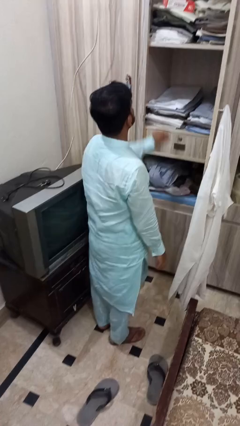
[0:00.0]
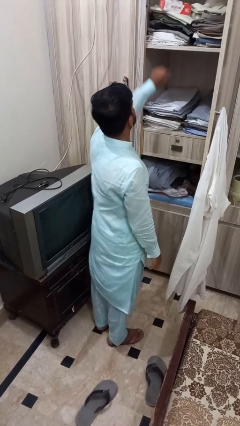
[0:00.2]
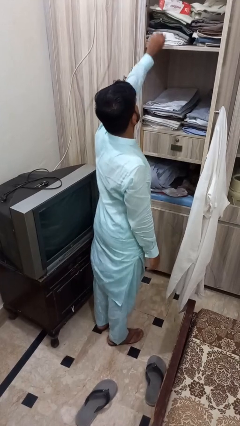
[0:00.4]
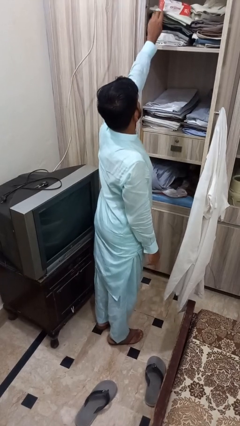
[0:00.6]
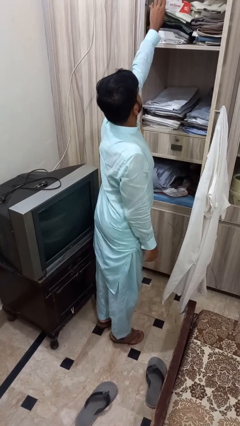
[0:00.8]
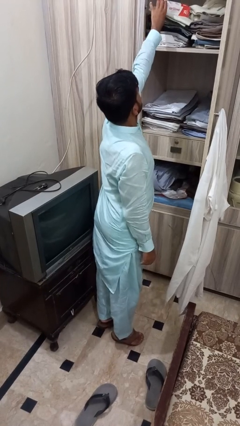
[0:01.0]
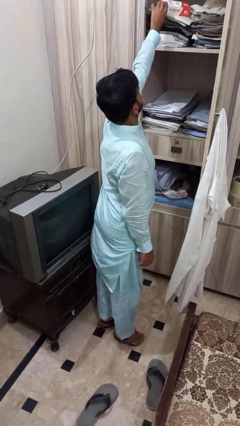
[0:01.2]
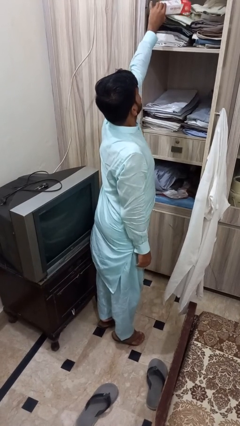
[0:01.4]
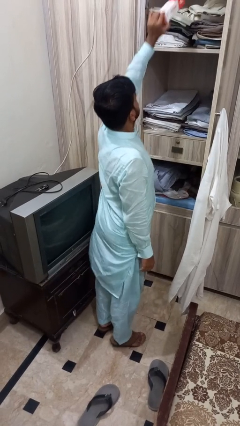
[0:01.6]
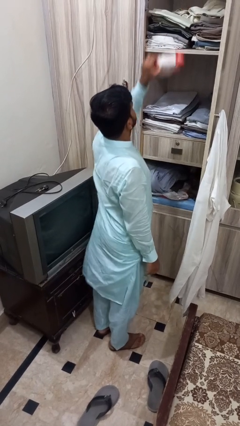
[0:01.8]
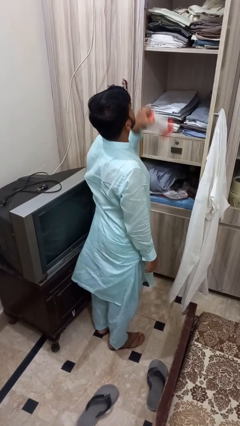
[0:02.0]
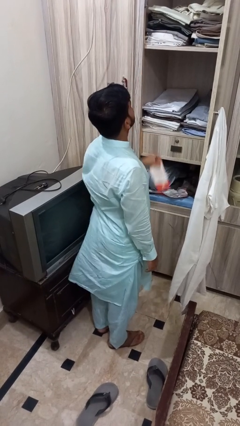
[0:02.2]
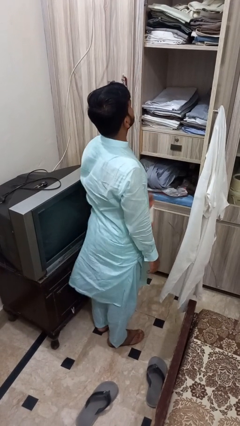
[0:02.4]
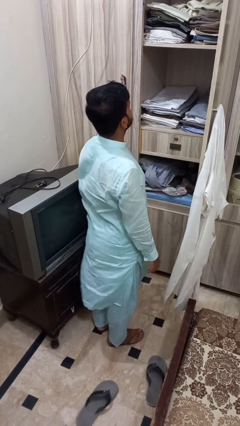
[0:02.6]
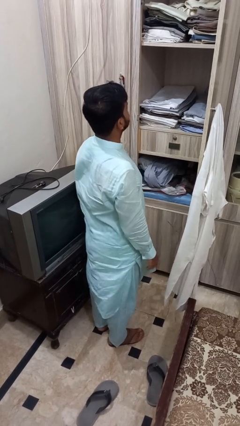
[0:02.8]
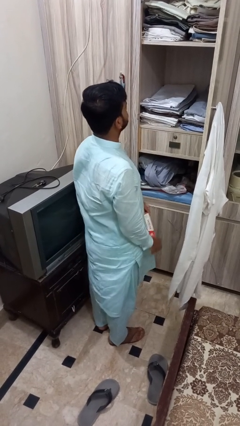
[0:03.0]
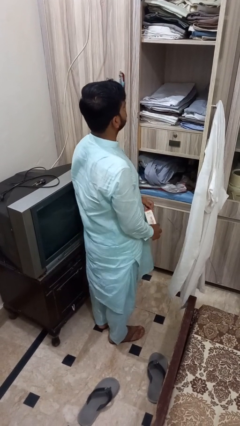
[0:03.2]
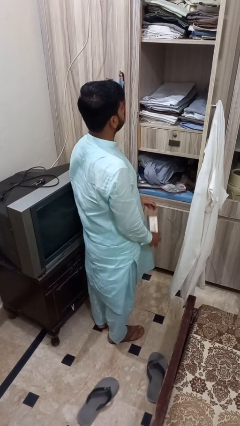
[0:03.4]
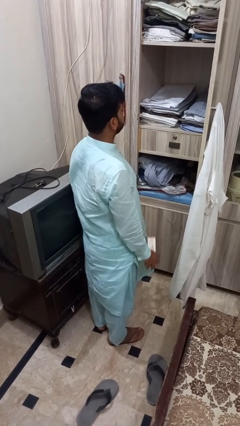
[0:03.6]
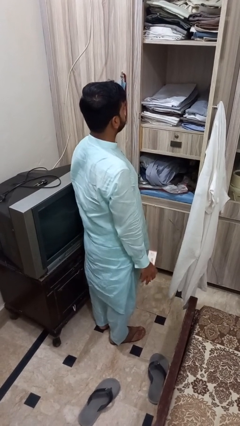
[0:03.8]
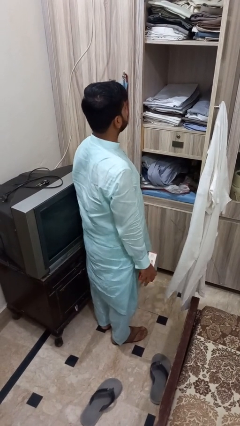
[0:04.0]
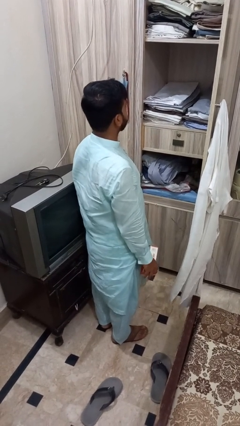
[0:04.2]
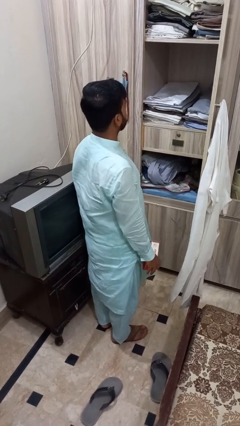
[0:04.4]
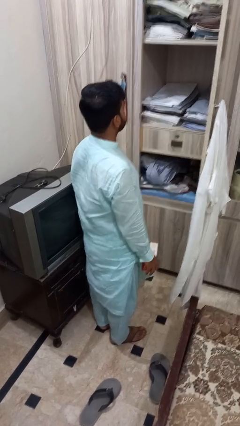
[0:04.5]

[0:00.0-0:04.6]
person picks up object from shelf

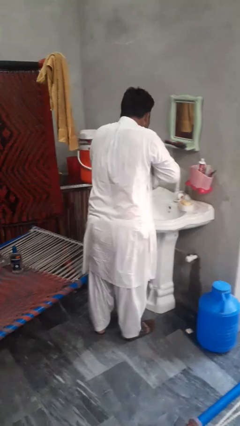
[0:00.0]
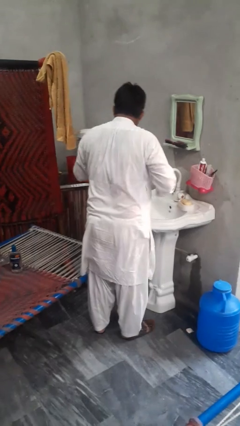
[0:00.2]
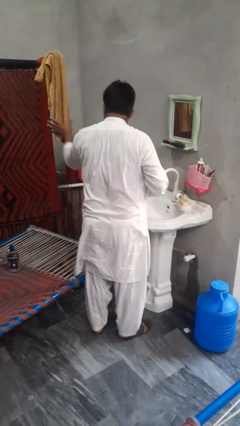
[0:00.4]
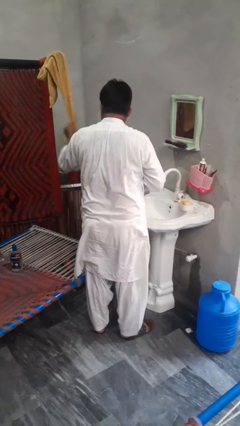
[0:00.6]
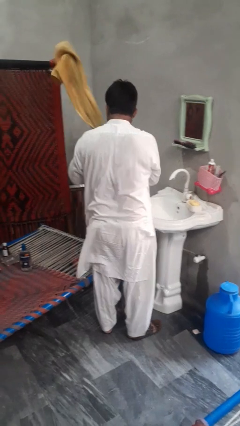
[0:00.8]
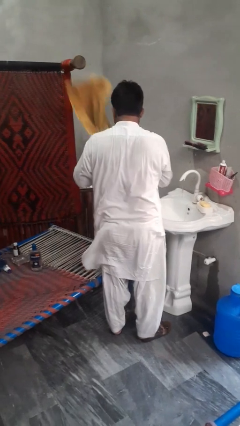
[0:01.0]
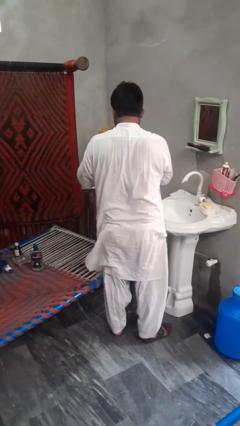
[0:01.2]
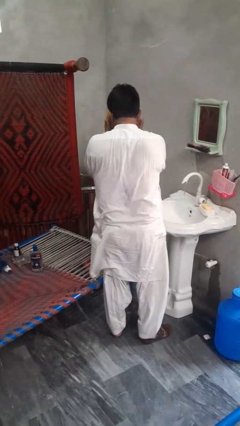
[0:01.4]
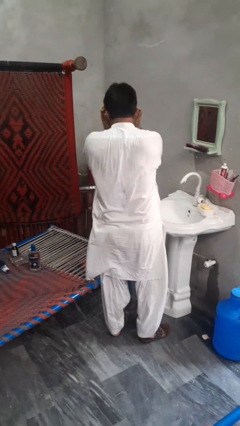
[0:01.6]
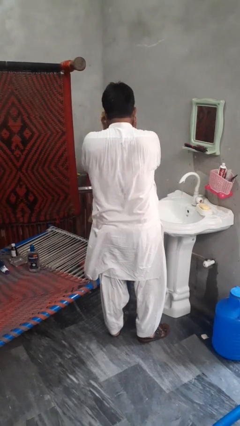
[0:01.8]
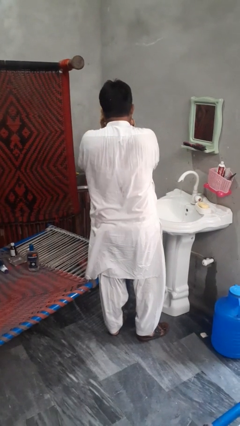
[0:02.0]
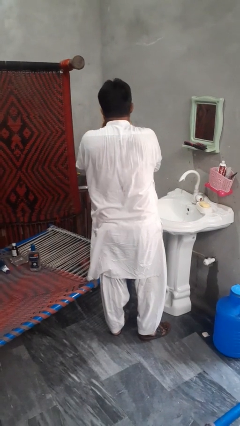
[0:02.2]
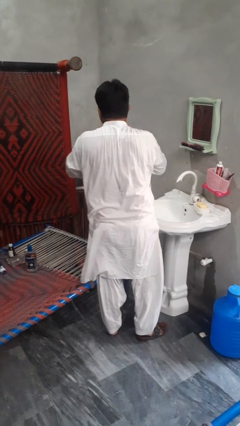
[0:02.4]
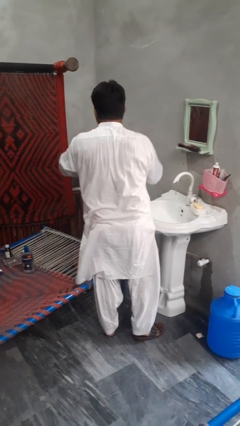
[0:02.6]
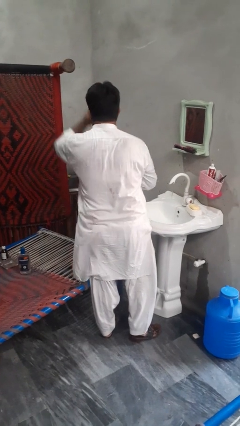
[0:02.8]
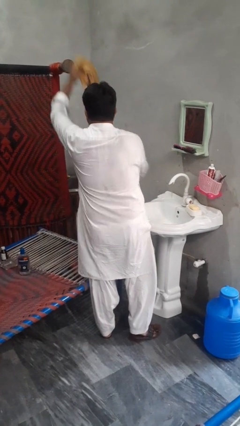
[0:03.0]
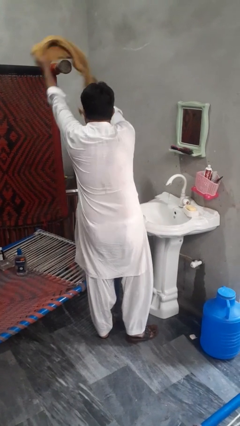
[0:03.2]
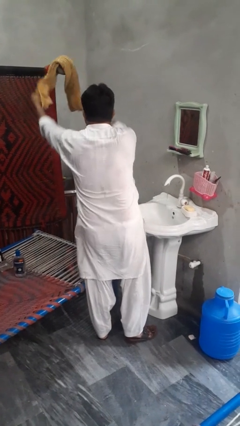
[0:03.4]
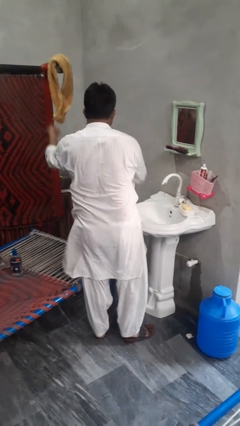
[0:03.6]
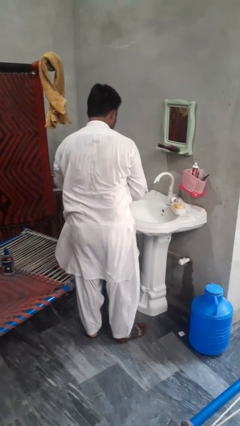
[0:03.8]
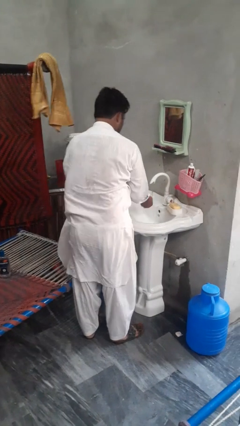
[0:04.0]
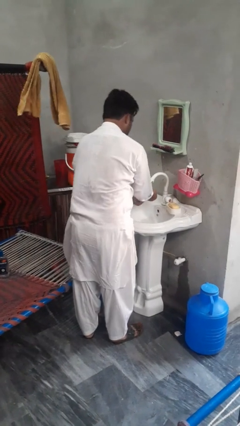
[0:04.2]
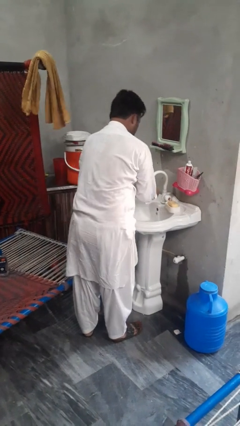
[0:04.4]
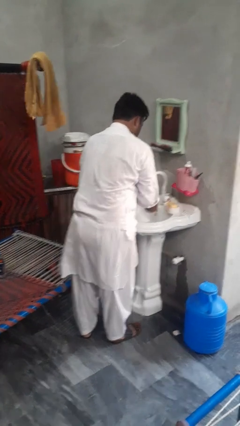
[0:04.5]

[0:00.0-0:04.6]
person dries face with towel

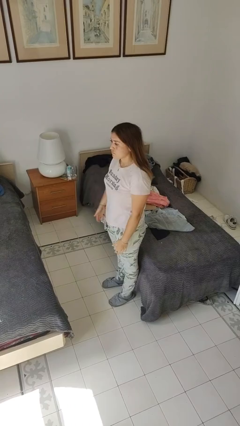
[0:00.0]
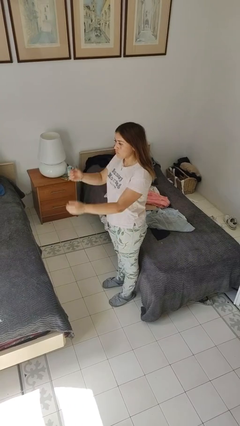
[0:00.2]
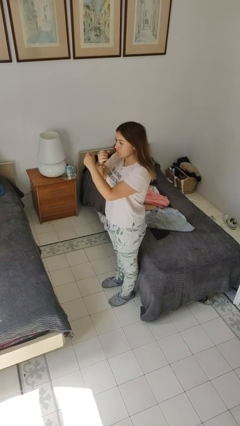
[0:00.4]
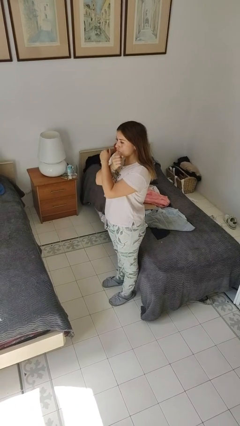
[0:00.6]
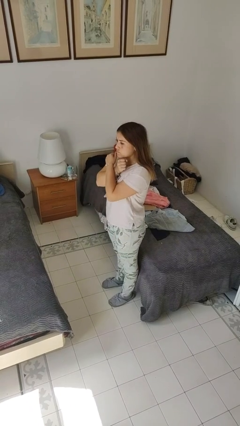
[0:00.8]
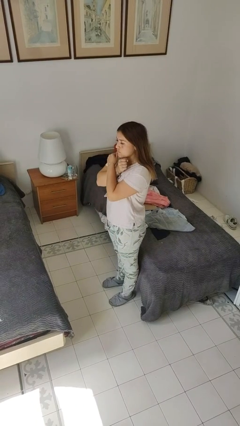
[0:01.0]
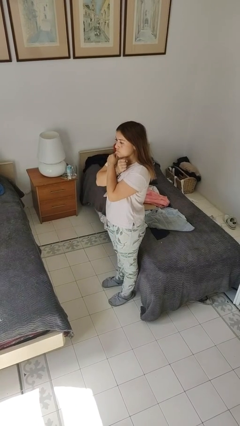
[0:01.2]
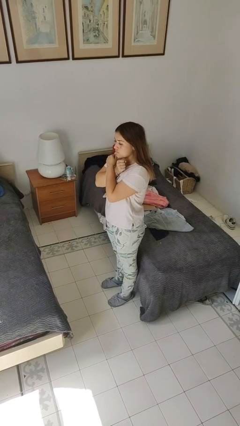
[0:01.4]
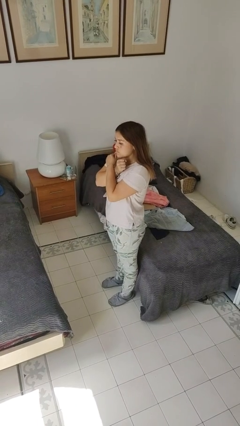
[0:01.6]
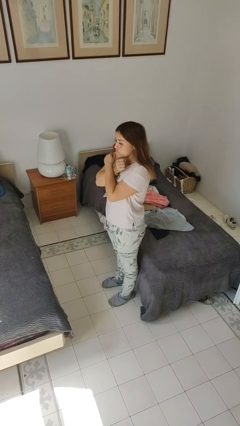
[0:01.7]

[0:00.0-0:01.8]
person gestures arms x

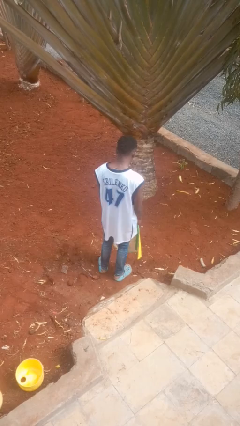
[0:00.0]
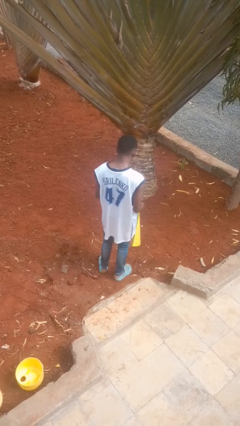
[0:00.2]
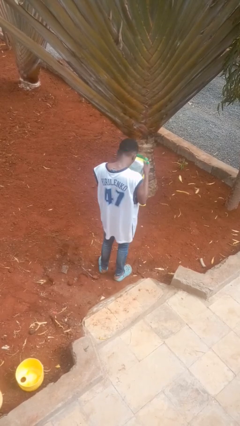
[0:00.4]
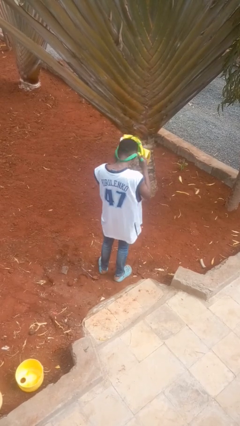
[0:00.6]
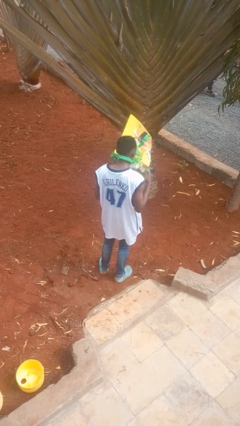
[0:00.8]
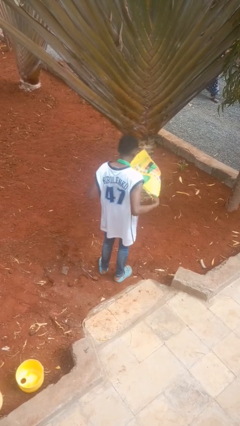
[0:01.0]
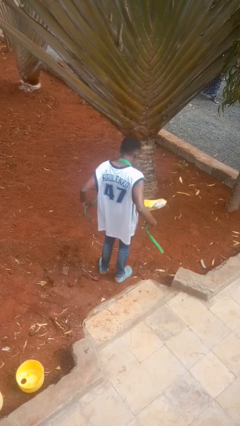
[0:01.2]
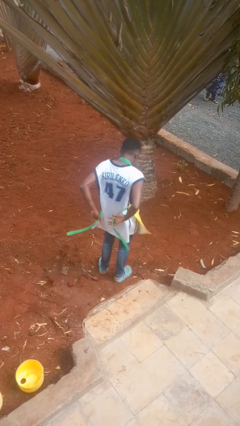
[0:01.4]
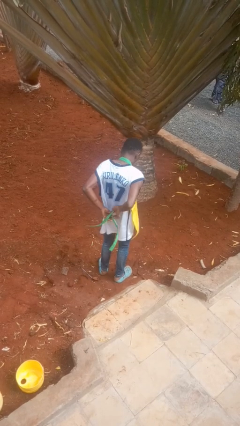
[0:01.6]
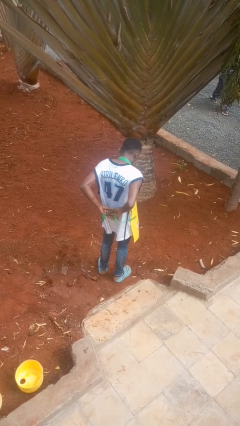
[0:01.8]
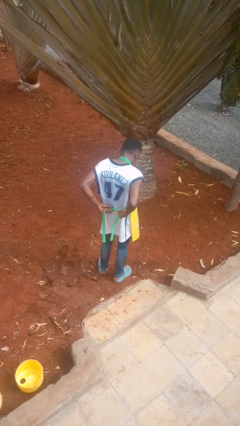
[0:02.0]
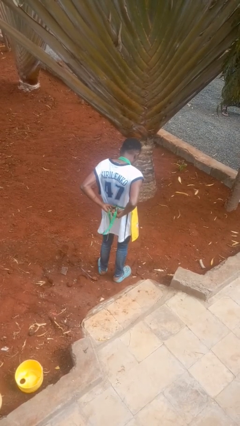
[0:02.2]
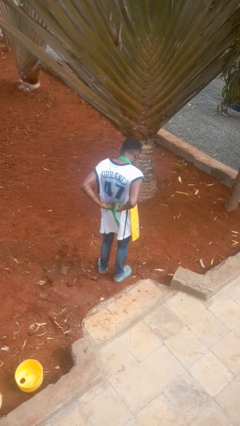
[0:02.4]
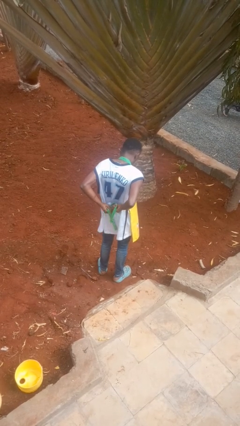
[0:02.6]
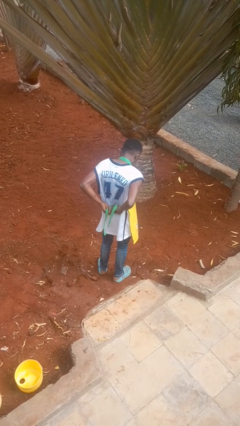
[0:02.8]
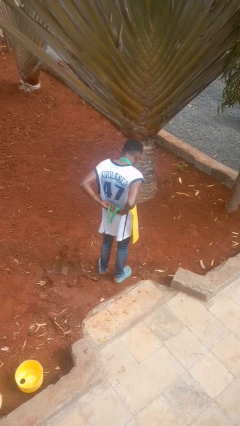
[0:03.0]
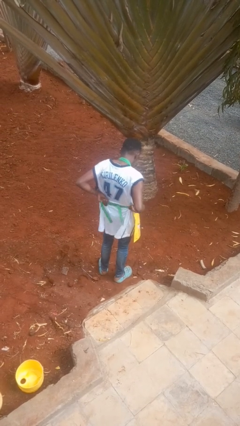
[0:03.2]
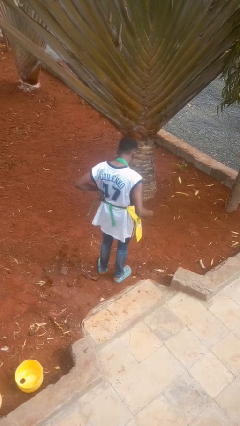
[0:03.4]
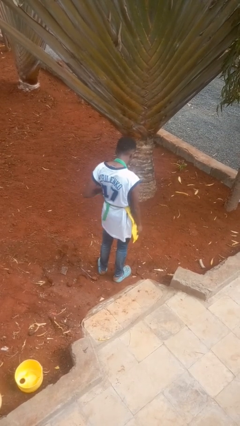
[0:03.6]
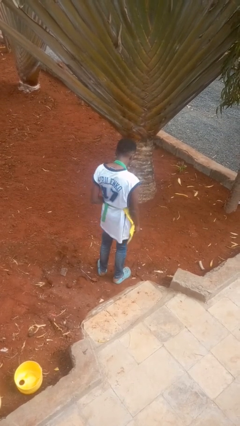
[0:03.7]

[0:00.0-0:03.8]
person puts on apron

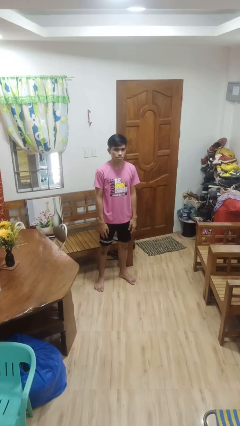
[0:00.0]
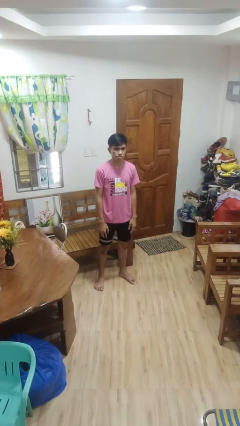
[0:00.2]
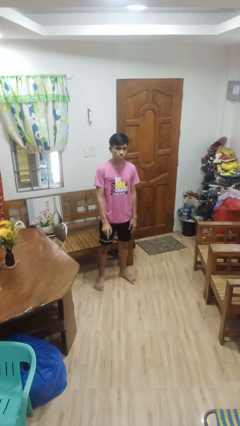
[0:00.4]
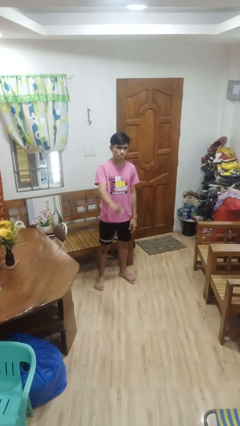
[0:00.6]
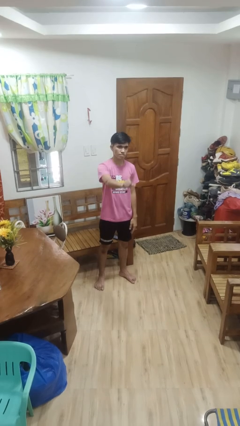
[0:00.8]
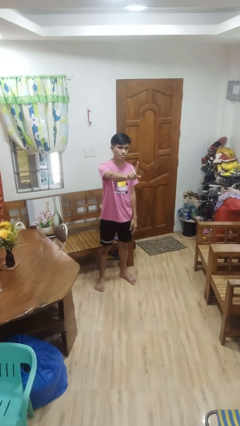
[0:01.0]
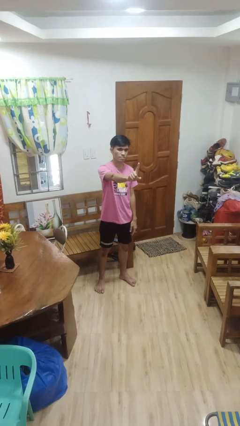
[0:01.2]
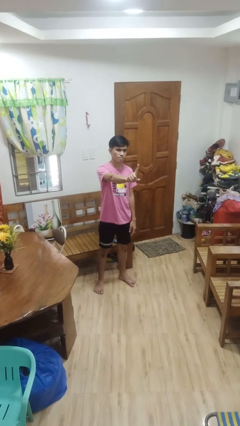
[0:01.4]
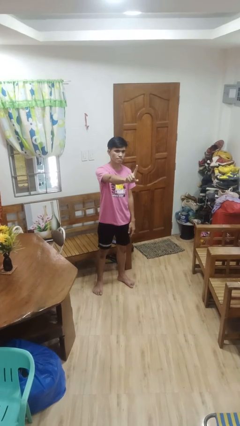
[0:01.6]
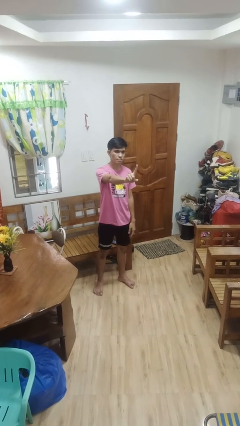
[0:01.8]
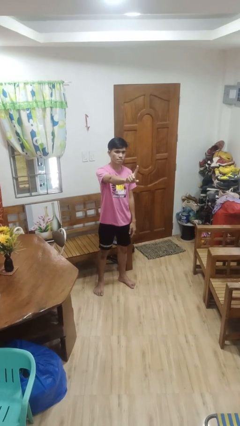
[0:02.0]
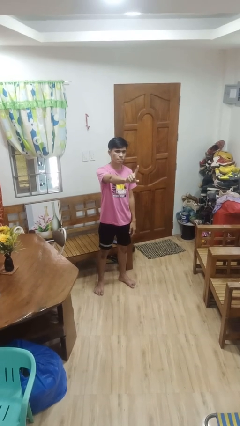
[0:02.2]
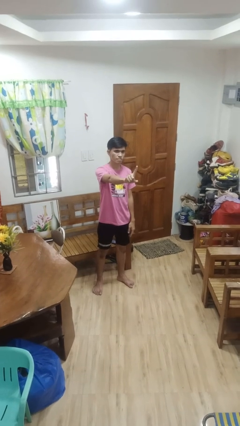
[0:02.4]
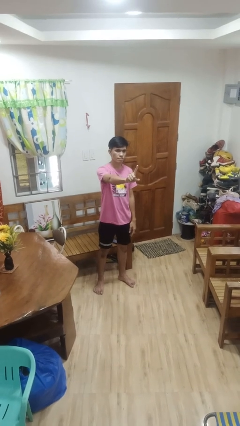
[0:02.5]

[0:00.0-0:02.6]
person gestures number one
